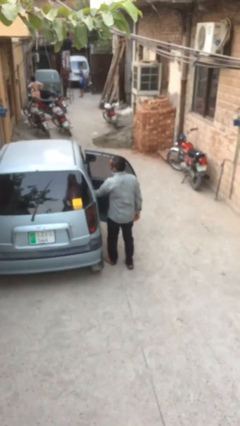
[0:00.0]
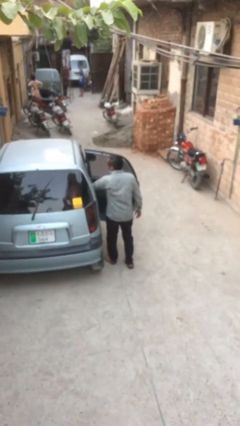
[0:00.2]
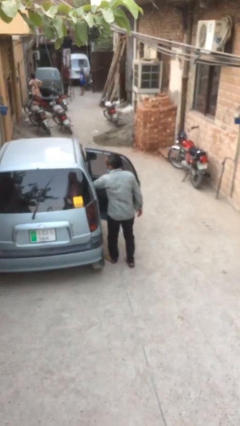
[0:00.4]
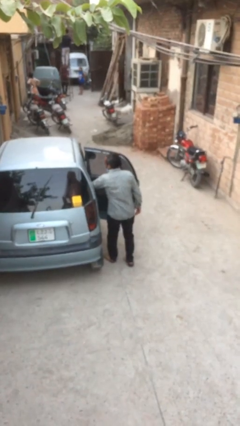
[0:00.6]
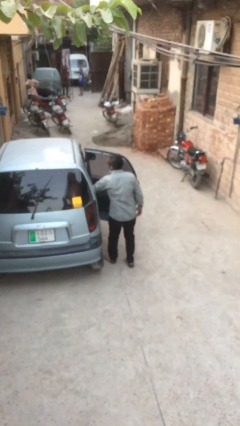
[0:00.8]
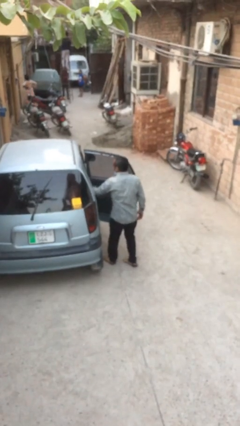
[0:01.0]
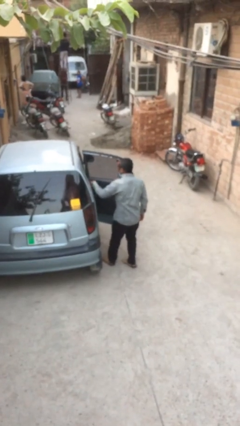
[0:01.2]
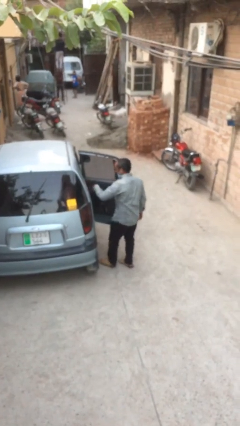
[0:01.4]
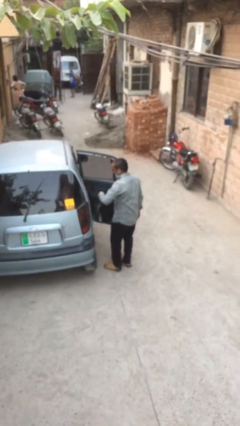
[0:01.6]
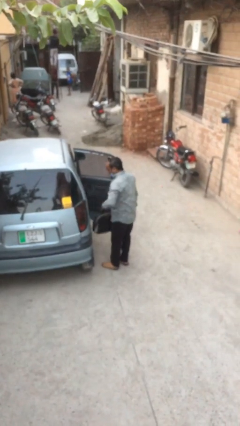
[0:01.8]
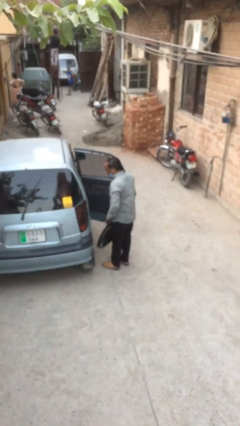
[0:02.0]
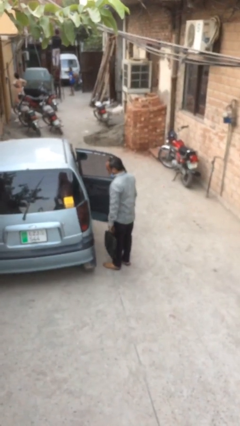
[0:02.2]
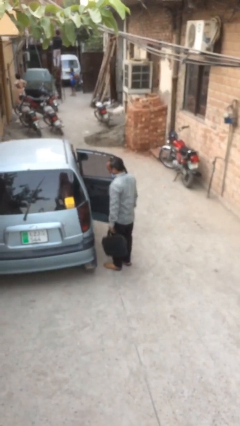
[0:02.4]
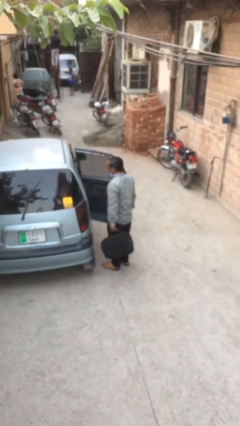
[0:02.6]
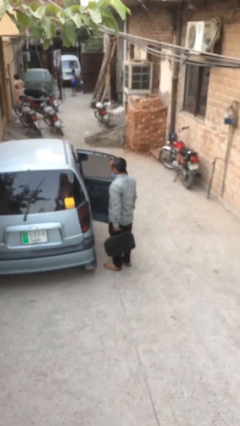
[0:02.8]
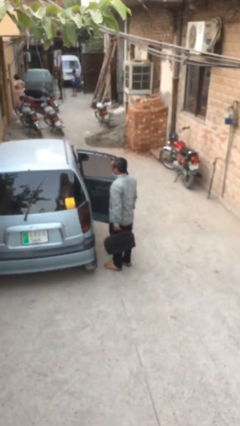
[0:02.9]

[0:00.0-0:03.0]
person unloads car

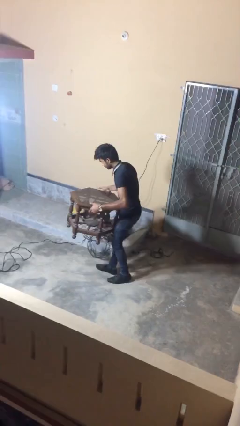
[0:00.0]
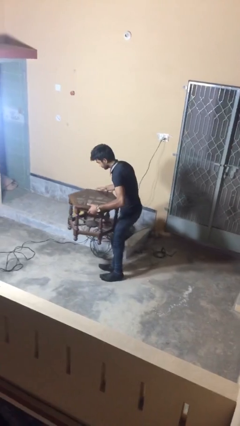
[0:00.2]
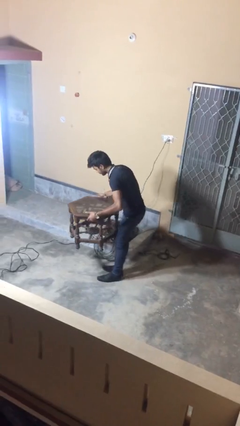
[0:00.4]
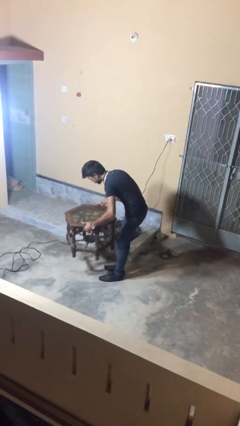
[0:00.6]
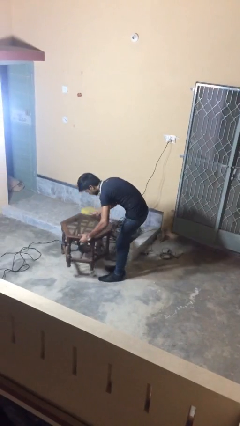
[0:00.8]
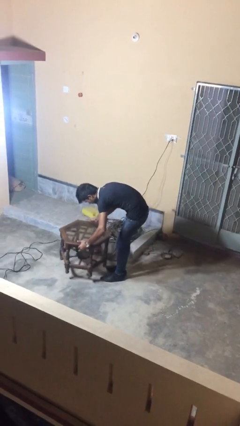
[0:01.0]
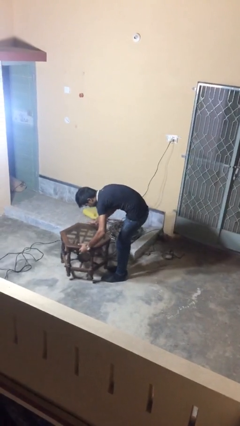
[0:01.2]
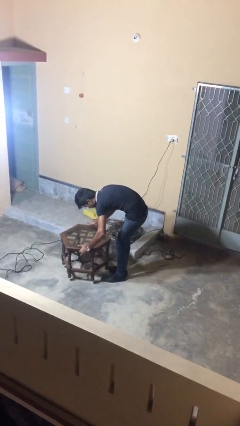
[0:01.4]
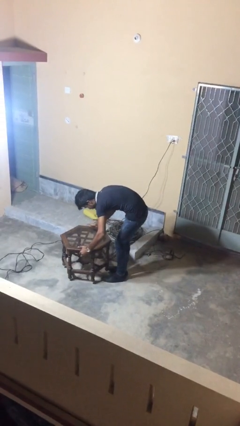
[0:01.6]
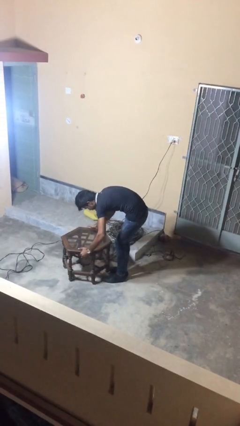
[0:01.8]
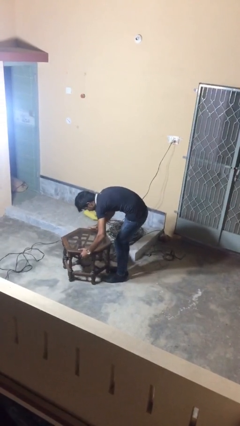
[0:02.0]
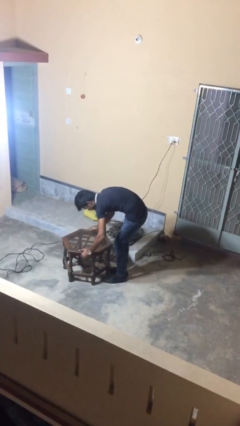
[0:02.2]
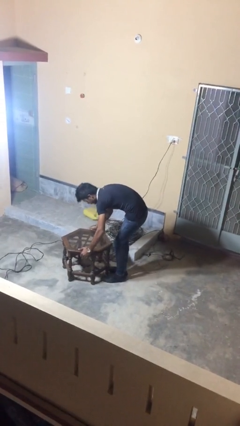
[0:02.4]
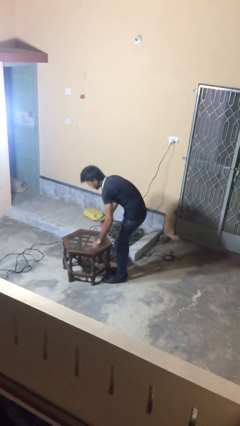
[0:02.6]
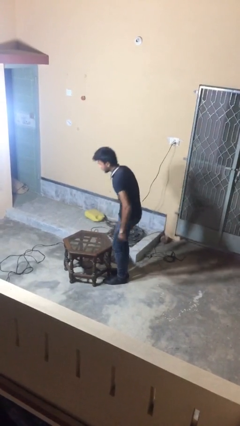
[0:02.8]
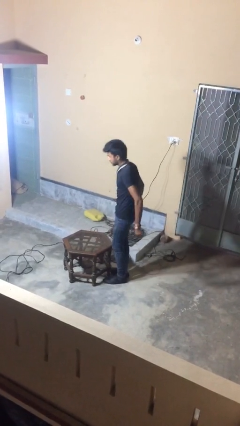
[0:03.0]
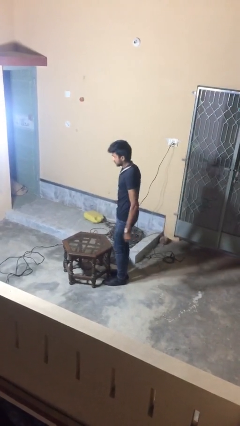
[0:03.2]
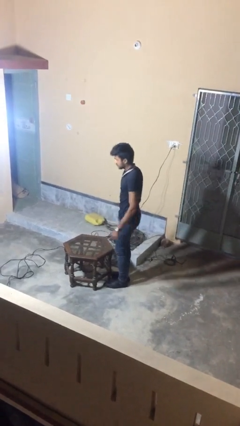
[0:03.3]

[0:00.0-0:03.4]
person puts down object on floor

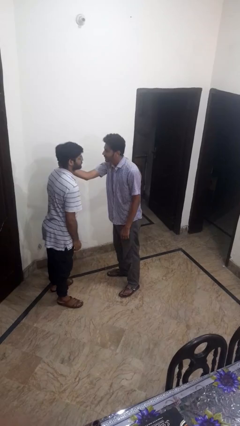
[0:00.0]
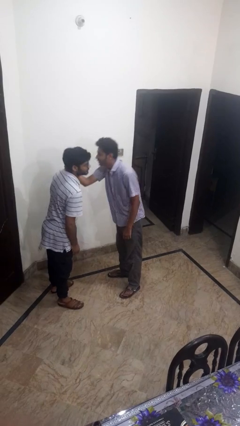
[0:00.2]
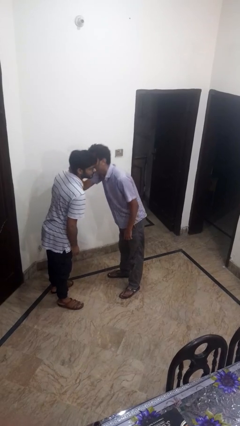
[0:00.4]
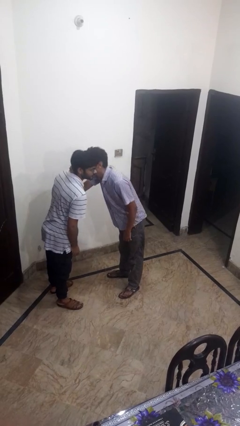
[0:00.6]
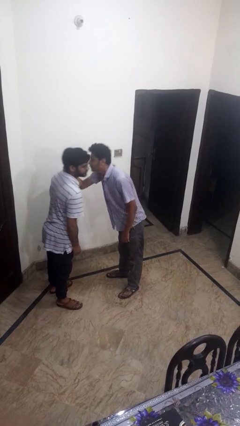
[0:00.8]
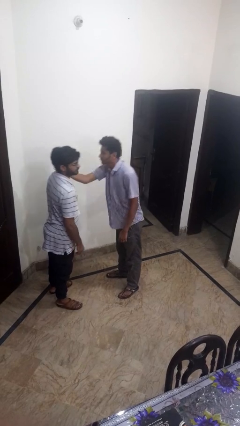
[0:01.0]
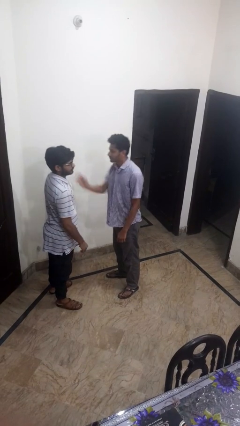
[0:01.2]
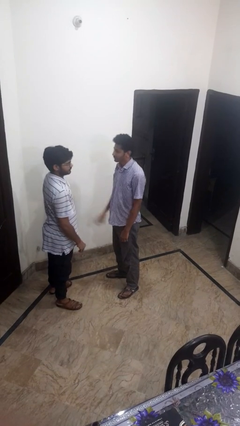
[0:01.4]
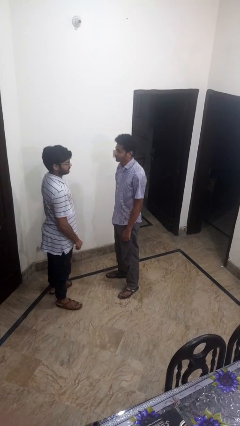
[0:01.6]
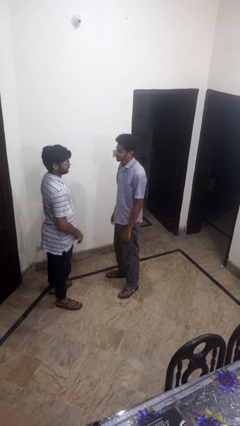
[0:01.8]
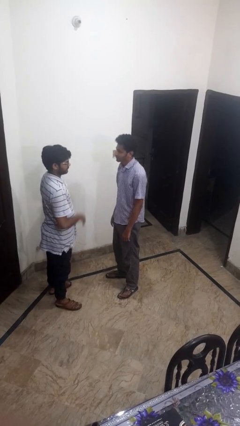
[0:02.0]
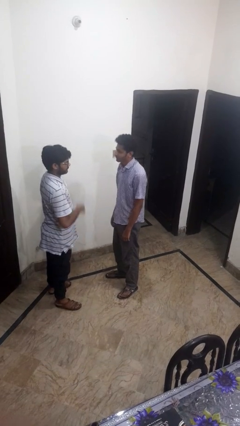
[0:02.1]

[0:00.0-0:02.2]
person grabs person by forearm

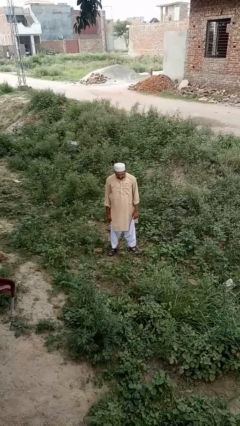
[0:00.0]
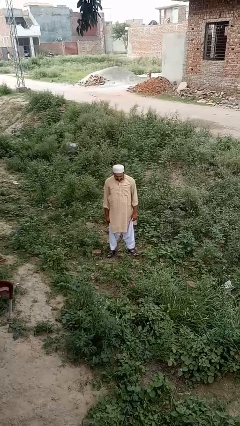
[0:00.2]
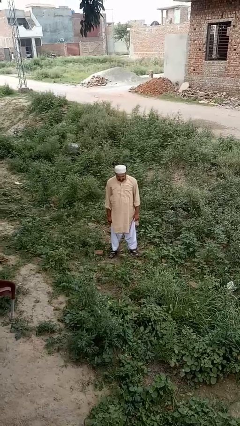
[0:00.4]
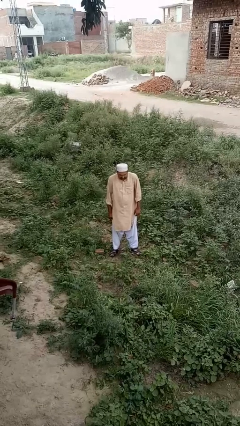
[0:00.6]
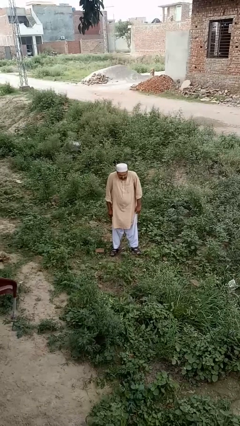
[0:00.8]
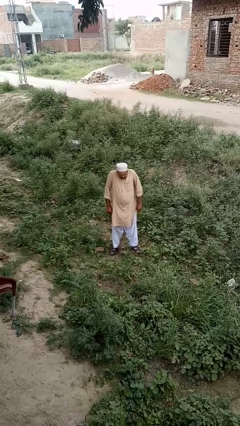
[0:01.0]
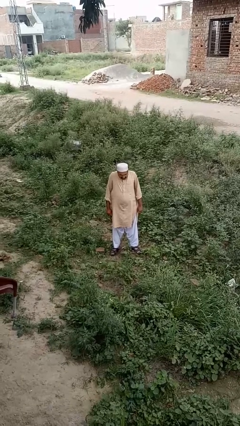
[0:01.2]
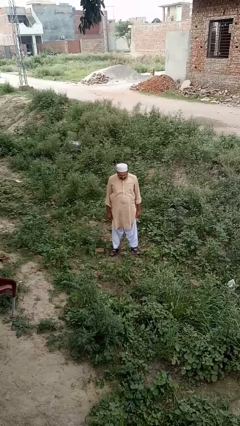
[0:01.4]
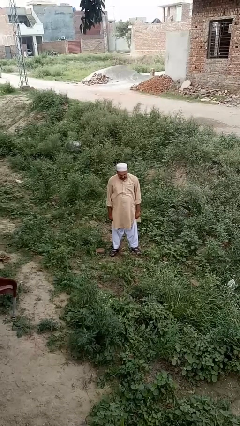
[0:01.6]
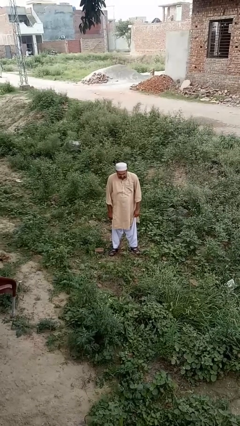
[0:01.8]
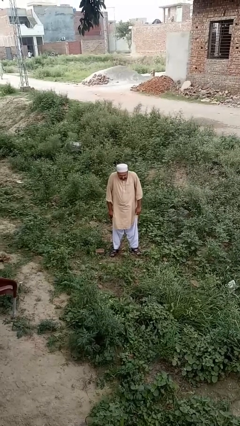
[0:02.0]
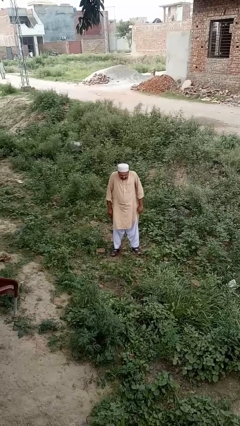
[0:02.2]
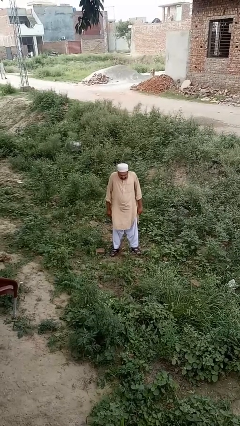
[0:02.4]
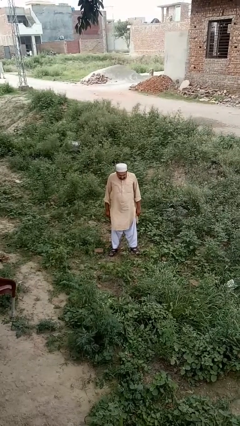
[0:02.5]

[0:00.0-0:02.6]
person shrugs

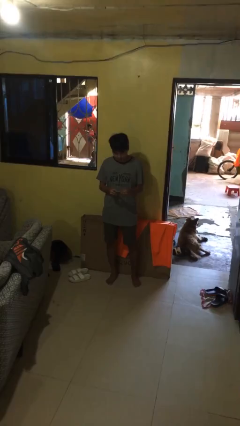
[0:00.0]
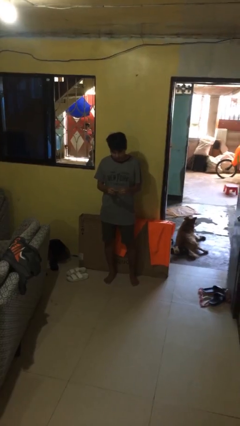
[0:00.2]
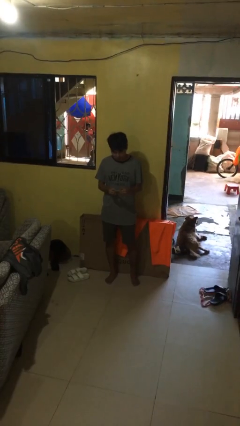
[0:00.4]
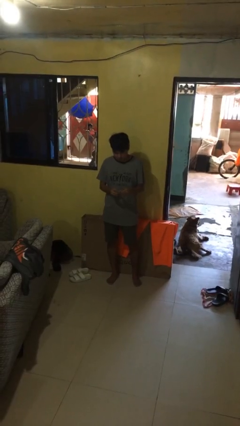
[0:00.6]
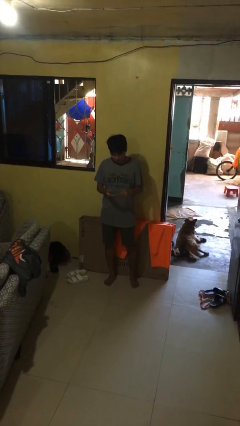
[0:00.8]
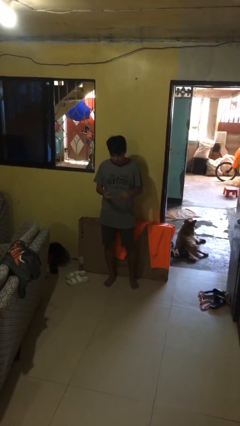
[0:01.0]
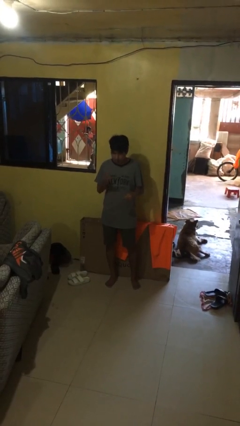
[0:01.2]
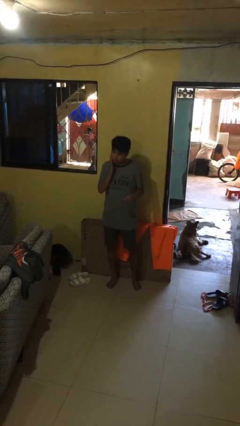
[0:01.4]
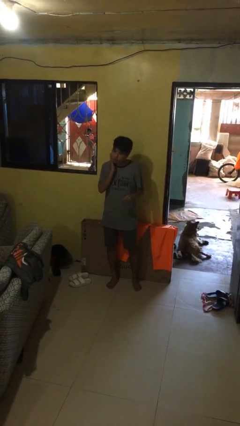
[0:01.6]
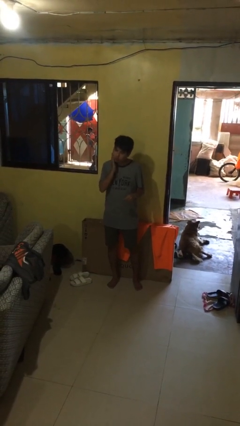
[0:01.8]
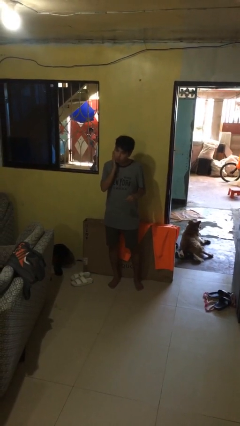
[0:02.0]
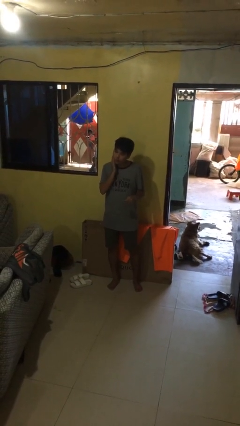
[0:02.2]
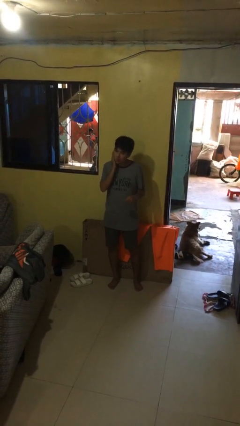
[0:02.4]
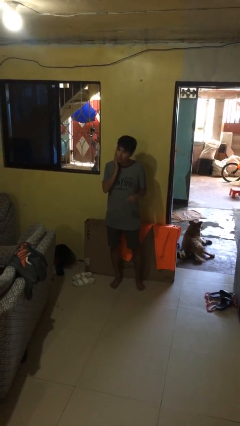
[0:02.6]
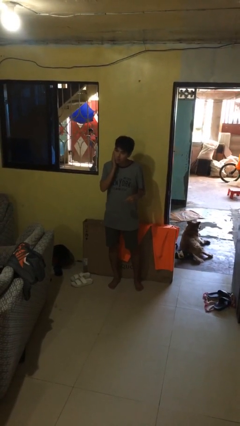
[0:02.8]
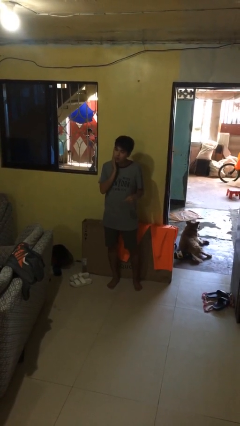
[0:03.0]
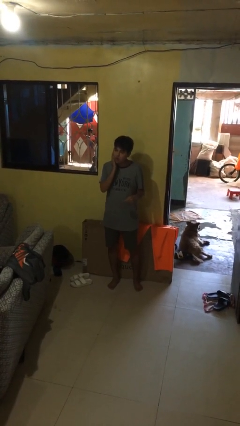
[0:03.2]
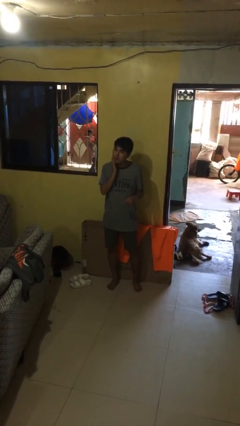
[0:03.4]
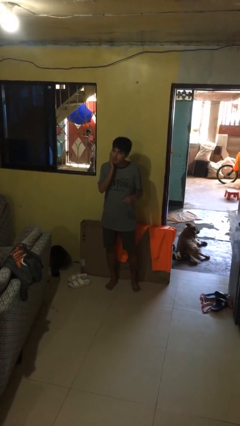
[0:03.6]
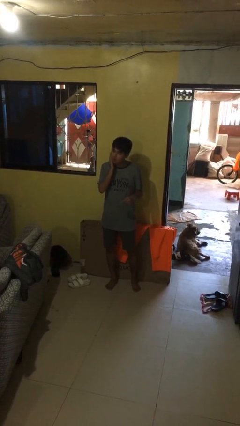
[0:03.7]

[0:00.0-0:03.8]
person applies facial moisturizer

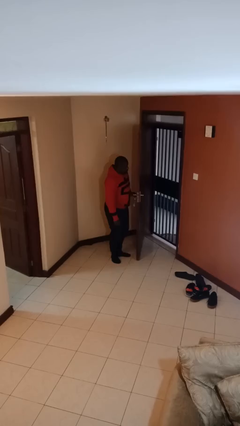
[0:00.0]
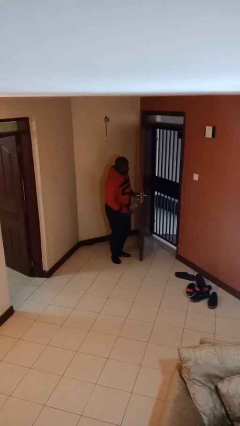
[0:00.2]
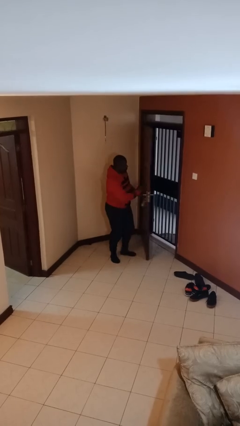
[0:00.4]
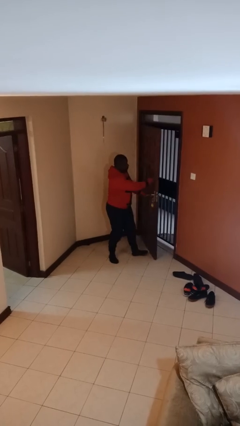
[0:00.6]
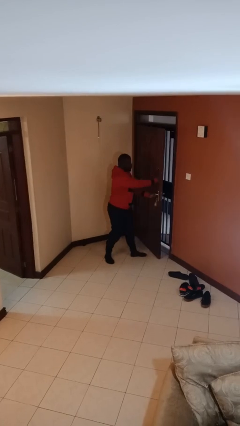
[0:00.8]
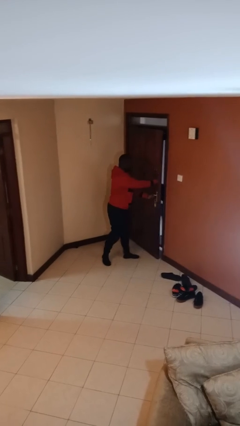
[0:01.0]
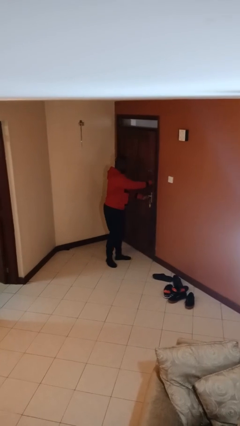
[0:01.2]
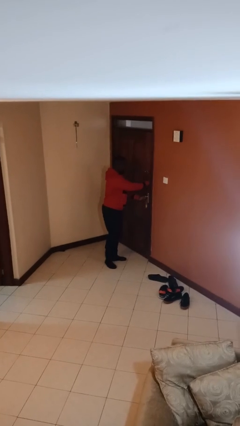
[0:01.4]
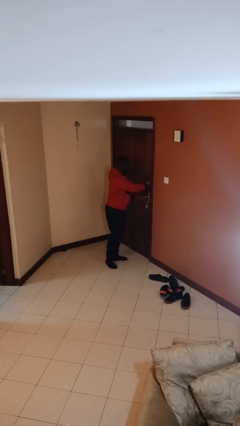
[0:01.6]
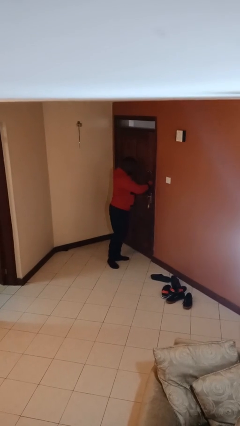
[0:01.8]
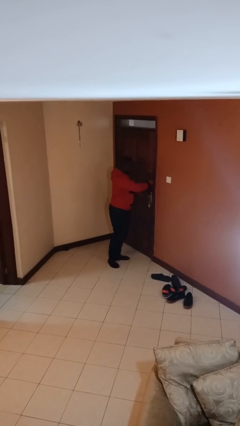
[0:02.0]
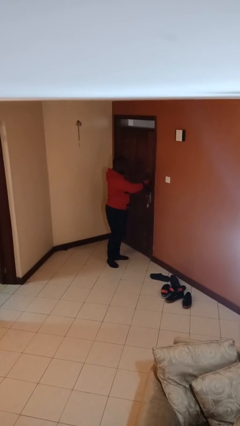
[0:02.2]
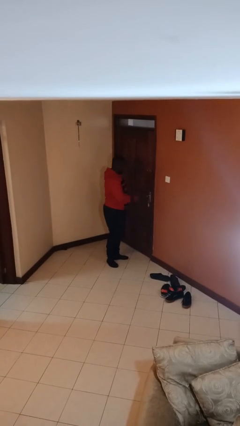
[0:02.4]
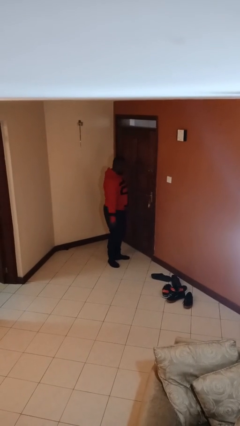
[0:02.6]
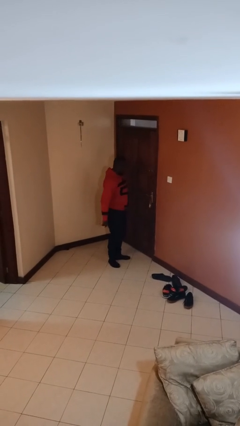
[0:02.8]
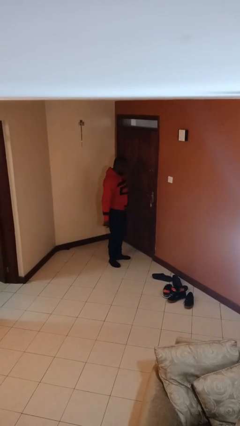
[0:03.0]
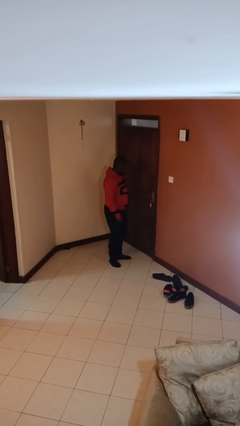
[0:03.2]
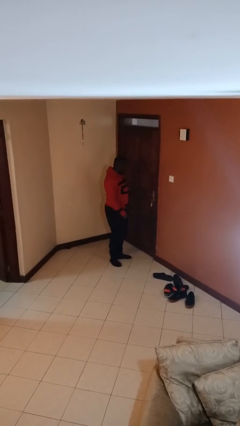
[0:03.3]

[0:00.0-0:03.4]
person closes facility door
